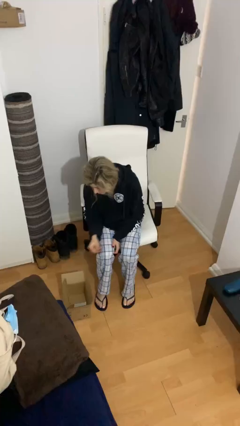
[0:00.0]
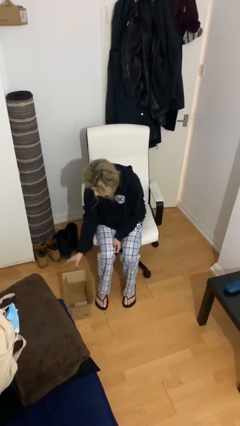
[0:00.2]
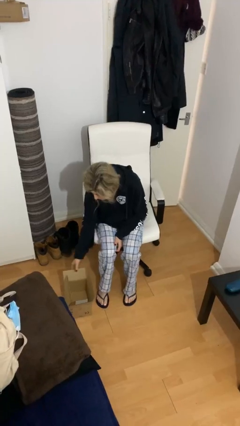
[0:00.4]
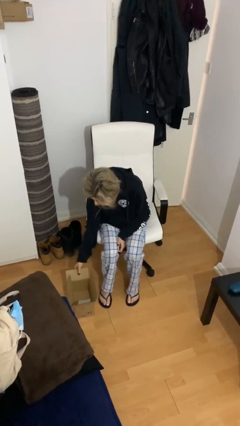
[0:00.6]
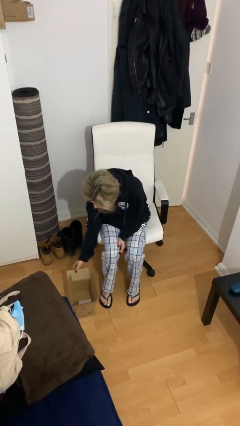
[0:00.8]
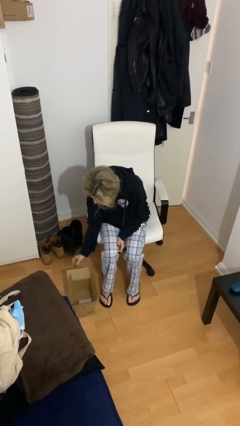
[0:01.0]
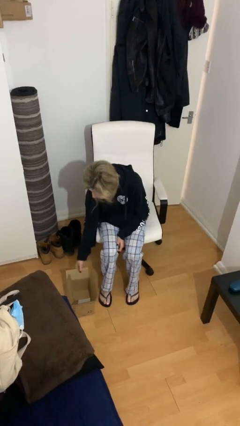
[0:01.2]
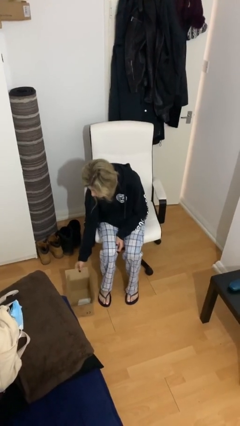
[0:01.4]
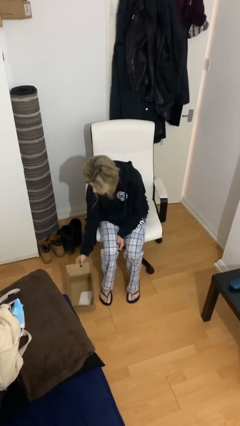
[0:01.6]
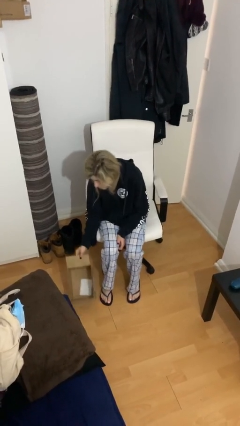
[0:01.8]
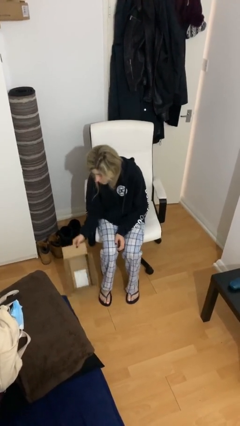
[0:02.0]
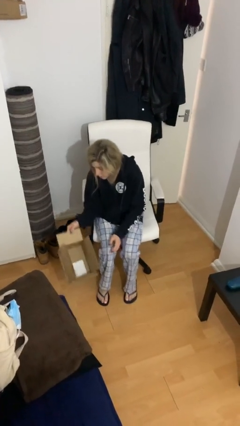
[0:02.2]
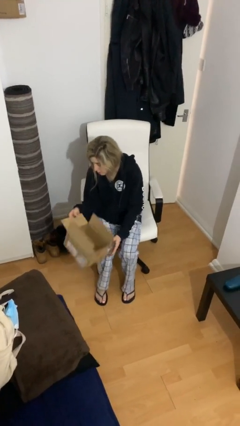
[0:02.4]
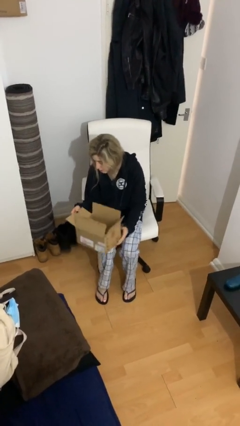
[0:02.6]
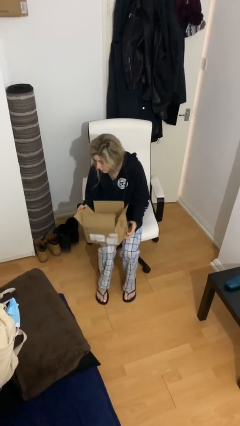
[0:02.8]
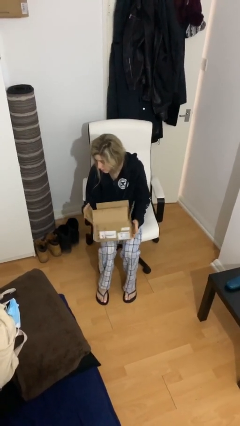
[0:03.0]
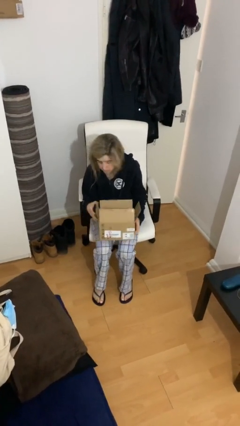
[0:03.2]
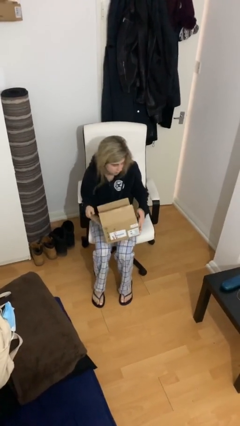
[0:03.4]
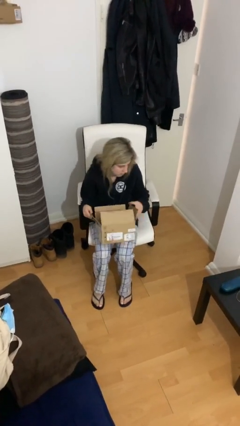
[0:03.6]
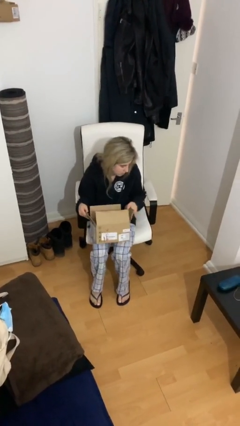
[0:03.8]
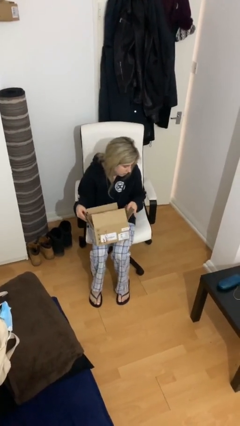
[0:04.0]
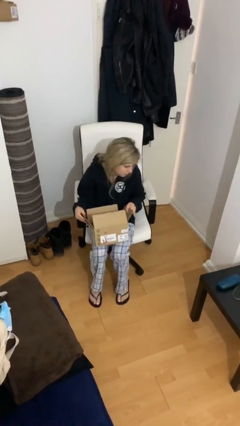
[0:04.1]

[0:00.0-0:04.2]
person picks up object from floor

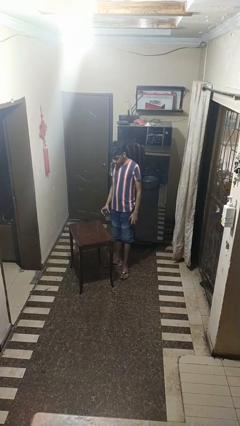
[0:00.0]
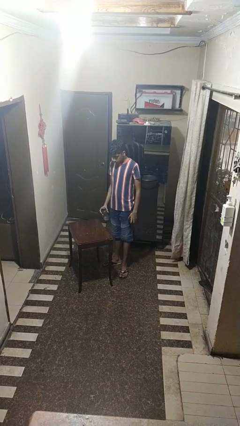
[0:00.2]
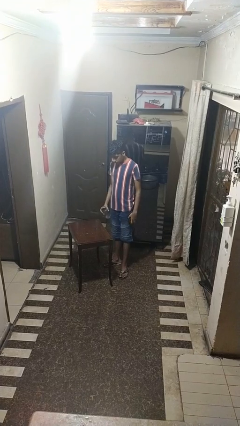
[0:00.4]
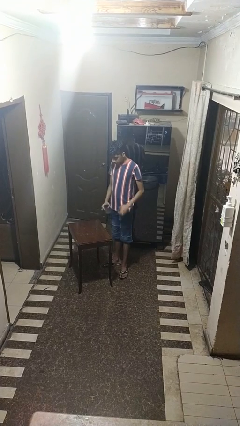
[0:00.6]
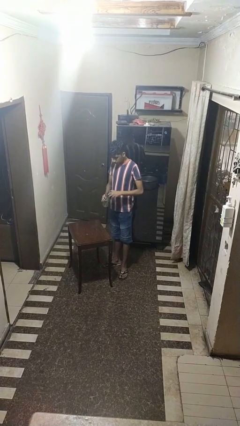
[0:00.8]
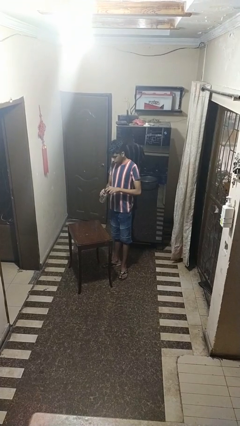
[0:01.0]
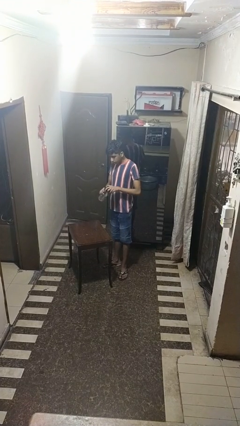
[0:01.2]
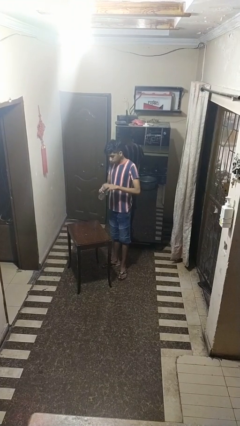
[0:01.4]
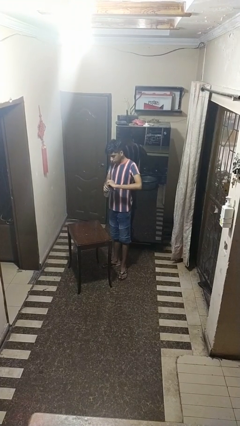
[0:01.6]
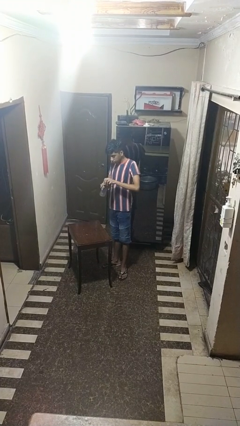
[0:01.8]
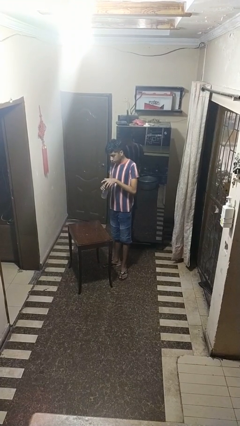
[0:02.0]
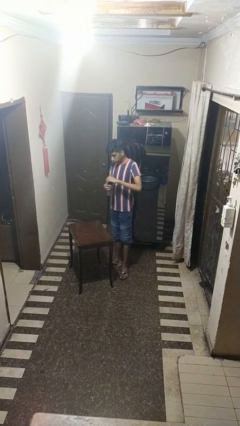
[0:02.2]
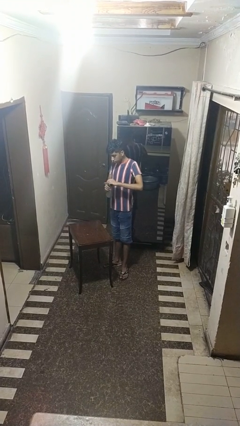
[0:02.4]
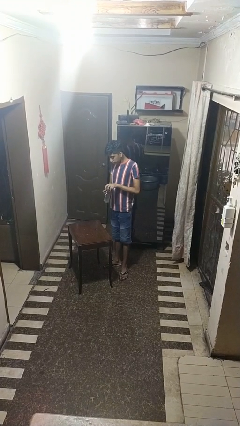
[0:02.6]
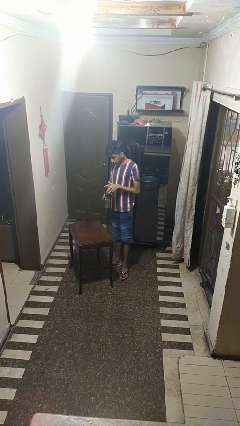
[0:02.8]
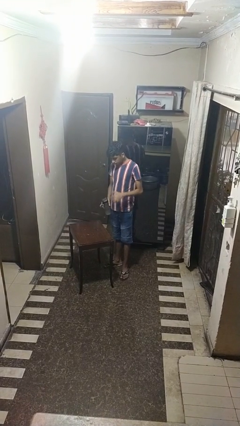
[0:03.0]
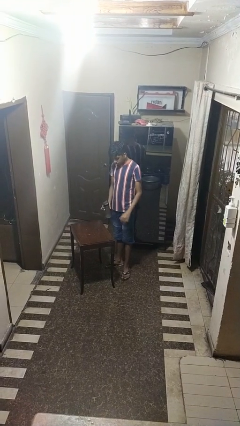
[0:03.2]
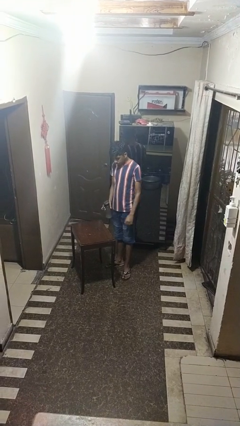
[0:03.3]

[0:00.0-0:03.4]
person screws lid to bottle

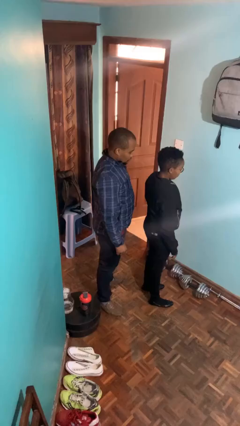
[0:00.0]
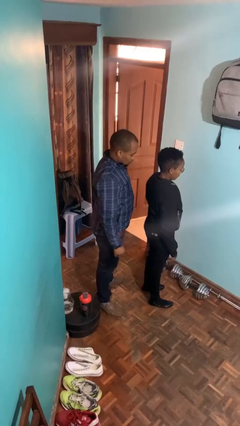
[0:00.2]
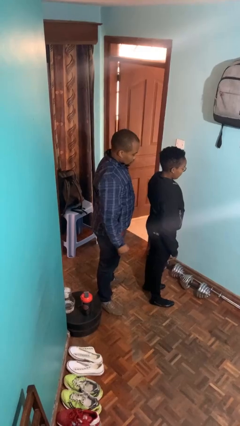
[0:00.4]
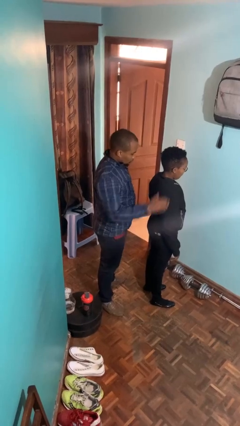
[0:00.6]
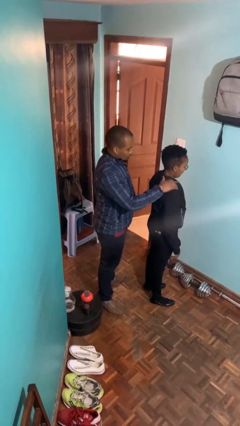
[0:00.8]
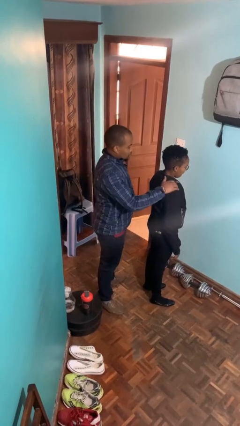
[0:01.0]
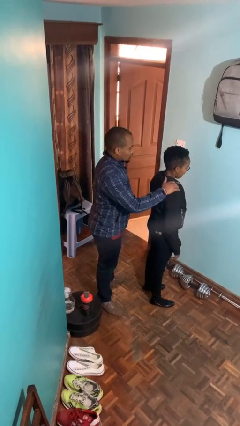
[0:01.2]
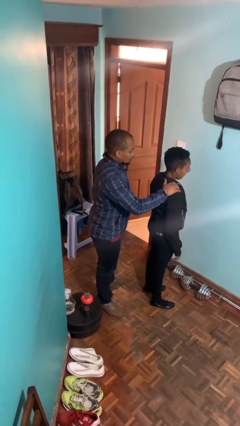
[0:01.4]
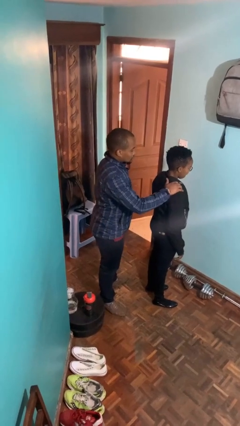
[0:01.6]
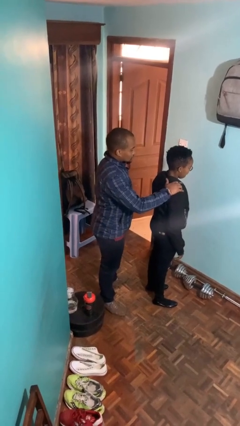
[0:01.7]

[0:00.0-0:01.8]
person grabs person by shoulder

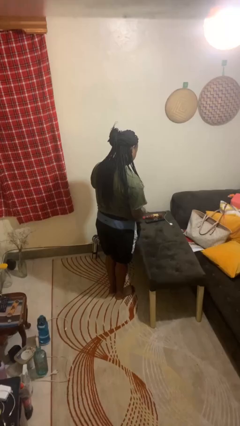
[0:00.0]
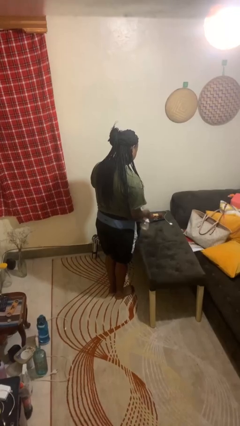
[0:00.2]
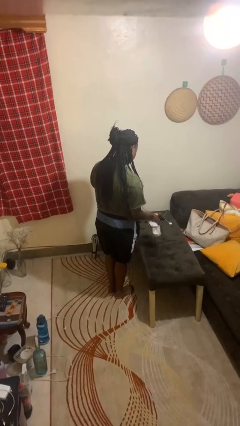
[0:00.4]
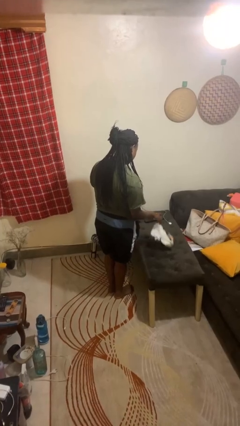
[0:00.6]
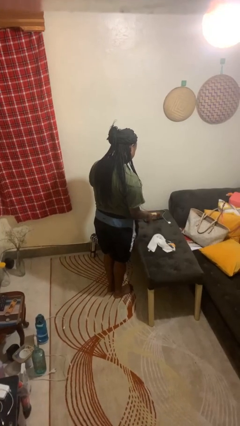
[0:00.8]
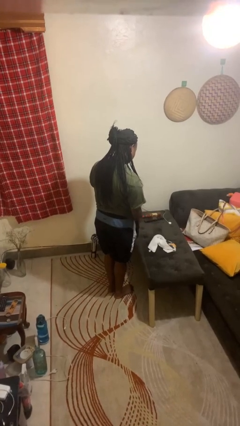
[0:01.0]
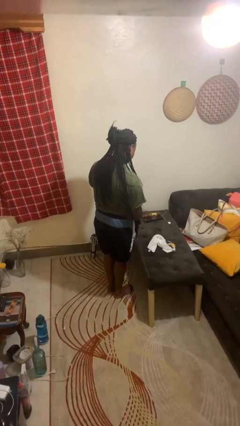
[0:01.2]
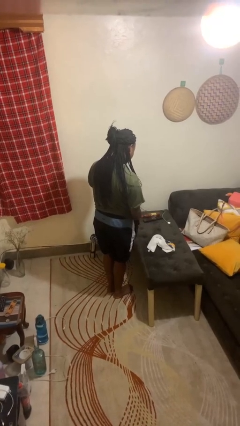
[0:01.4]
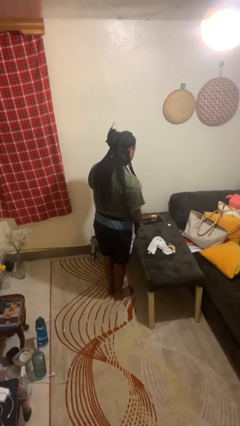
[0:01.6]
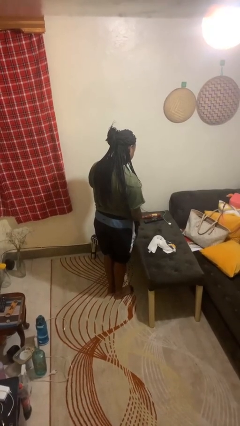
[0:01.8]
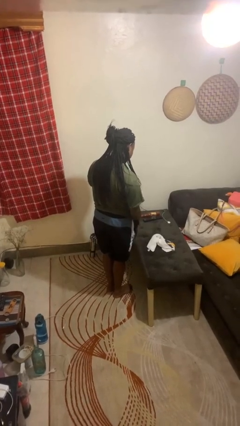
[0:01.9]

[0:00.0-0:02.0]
person throws object on table

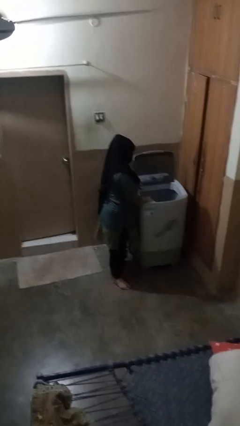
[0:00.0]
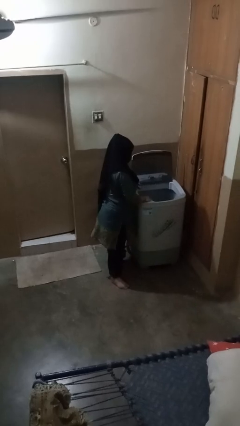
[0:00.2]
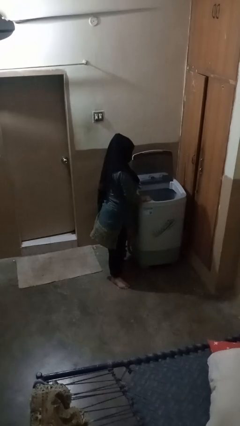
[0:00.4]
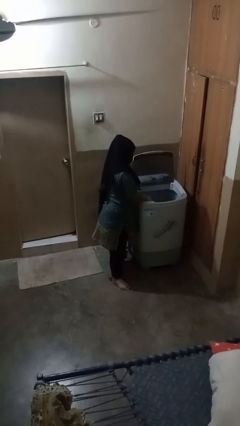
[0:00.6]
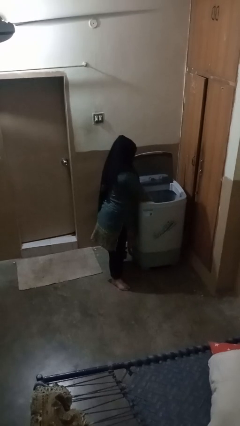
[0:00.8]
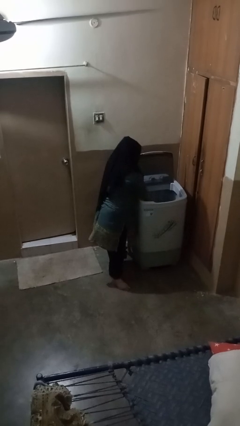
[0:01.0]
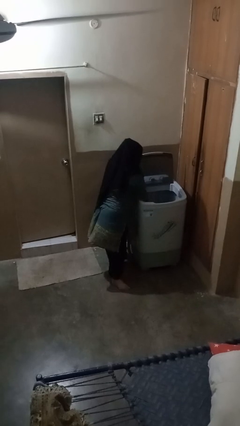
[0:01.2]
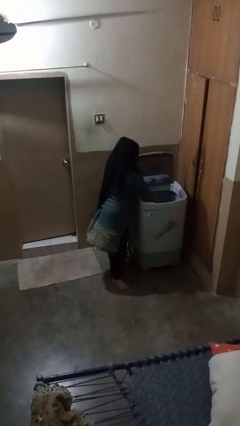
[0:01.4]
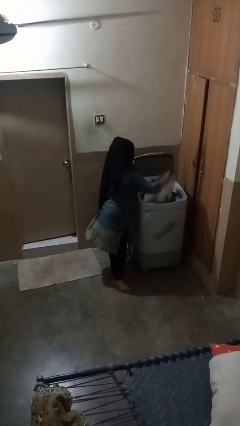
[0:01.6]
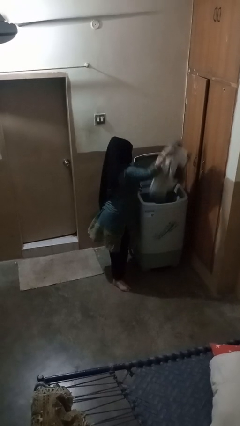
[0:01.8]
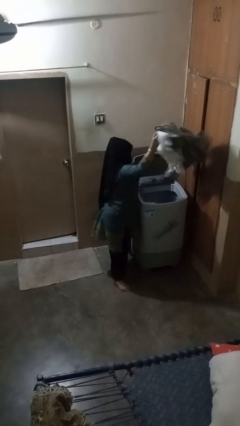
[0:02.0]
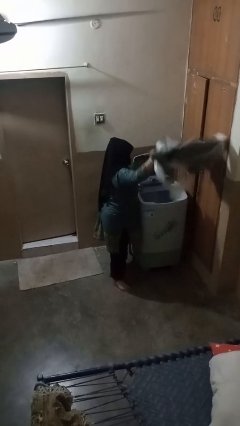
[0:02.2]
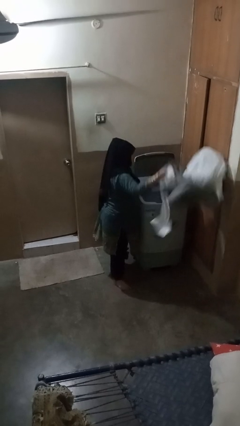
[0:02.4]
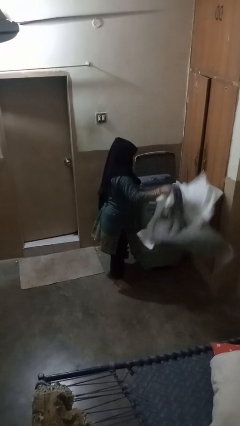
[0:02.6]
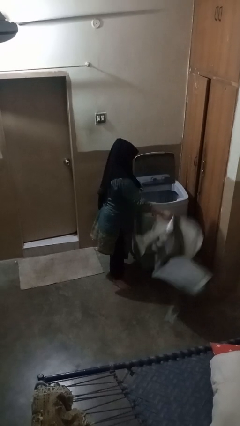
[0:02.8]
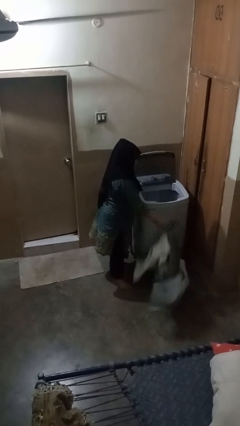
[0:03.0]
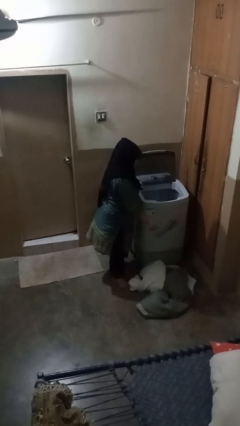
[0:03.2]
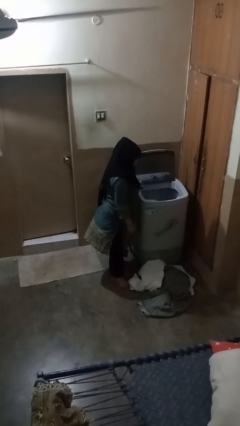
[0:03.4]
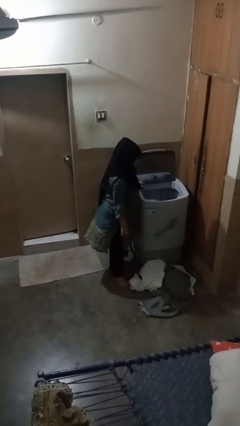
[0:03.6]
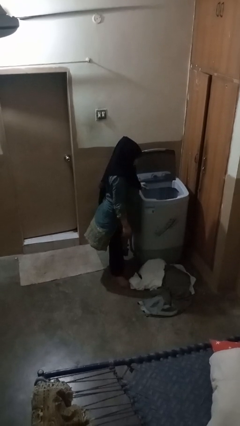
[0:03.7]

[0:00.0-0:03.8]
person unloads clotheswasher

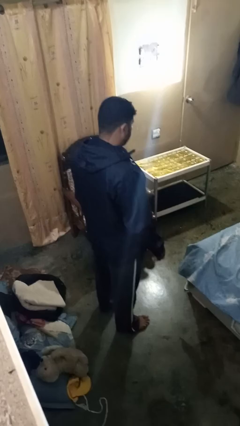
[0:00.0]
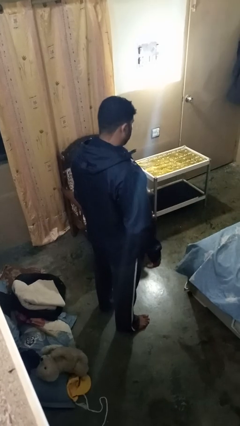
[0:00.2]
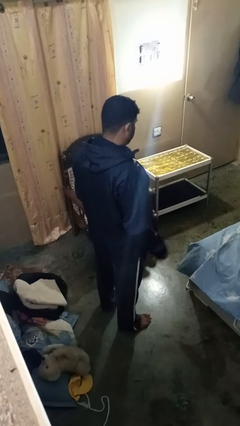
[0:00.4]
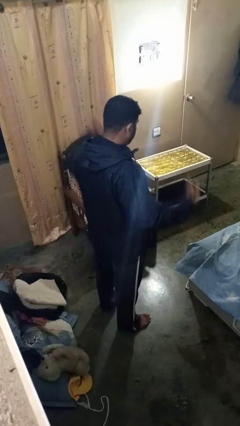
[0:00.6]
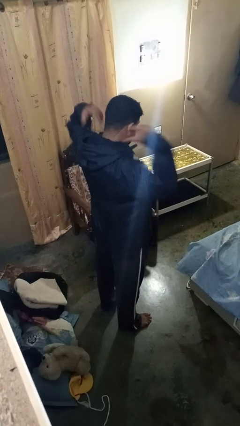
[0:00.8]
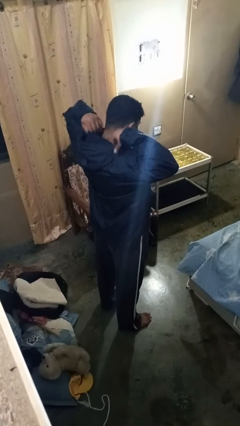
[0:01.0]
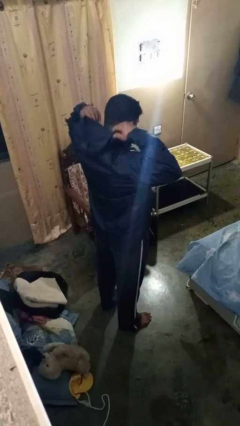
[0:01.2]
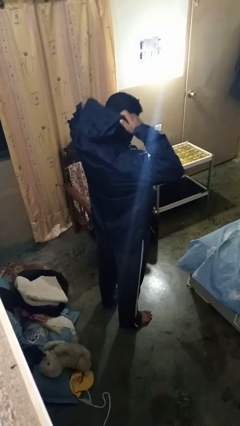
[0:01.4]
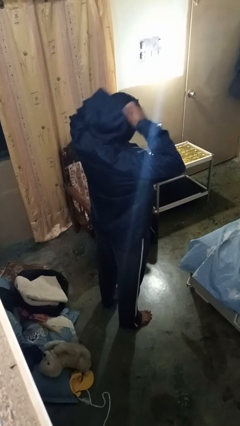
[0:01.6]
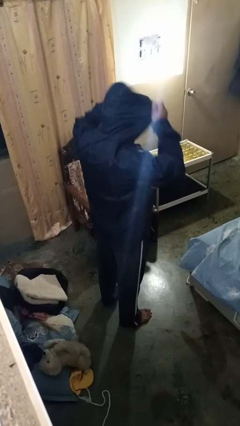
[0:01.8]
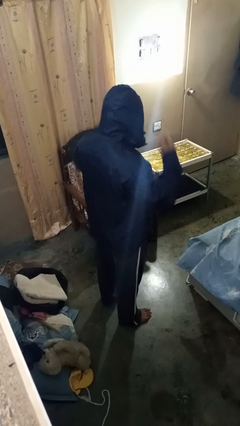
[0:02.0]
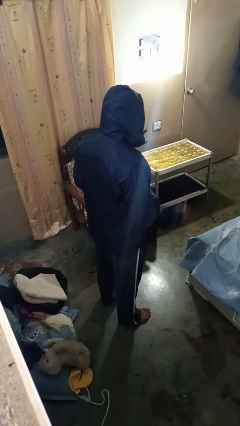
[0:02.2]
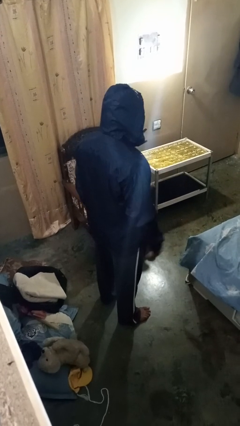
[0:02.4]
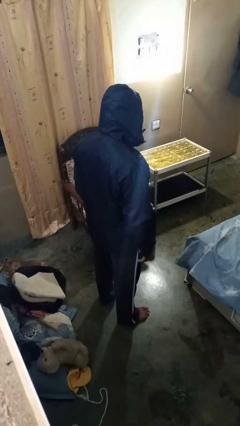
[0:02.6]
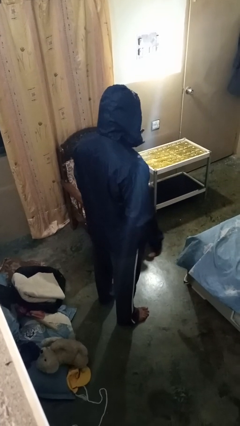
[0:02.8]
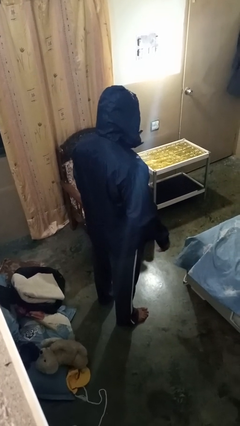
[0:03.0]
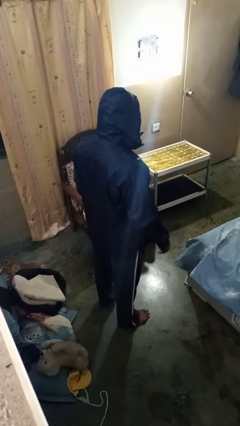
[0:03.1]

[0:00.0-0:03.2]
person puts on hoodie
